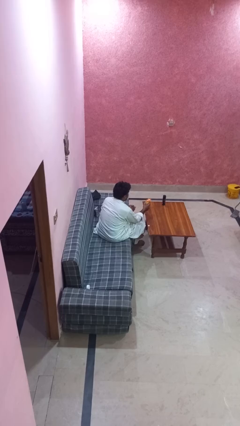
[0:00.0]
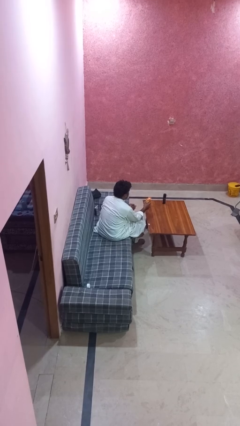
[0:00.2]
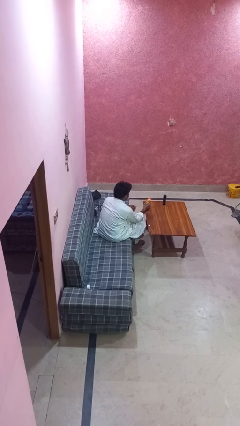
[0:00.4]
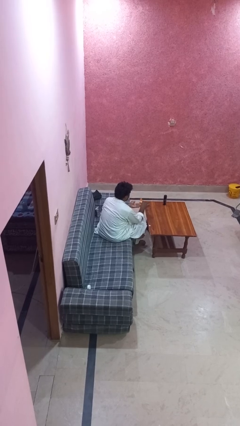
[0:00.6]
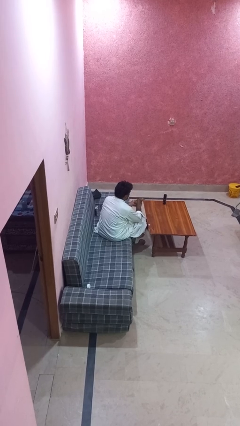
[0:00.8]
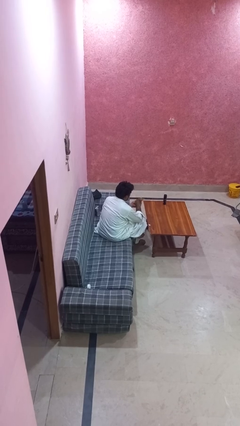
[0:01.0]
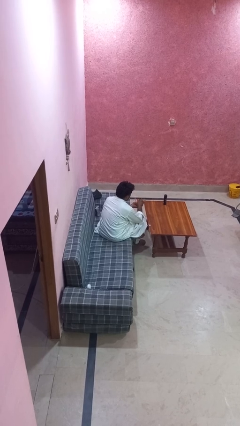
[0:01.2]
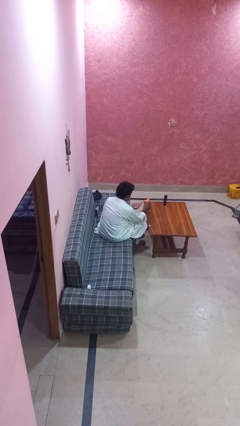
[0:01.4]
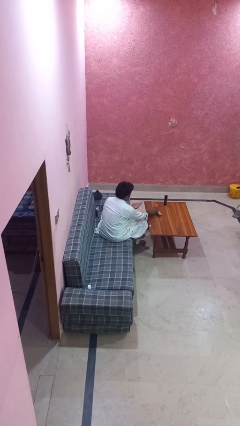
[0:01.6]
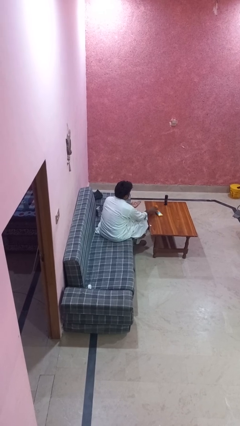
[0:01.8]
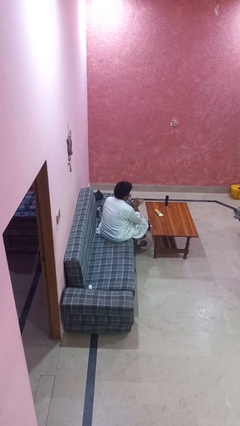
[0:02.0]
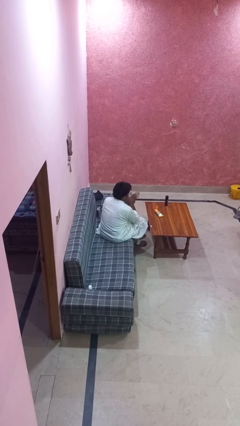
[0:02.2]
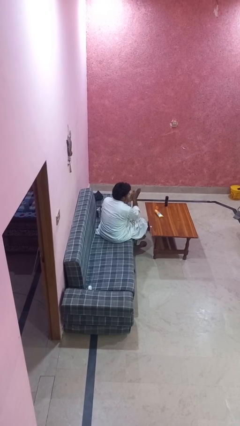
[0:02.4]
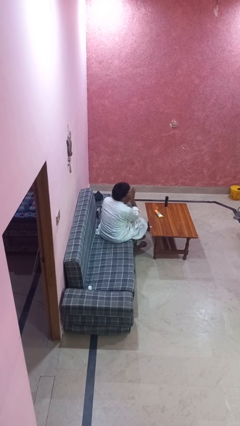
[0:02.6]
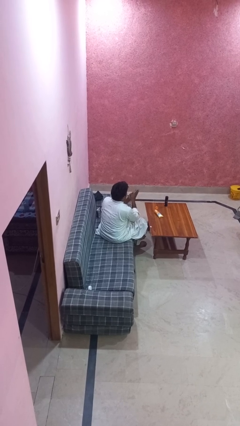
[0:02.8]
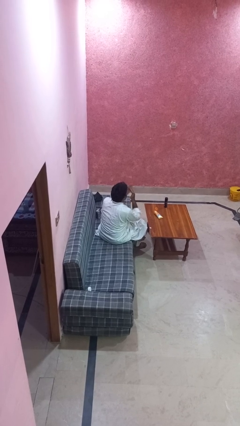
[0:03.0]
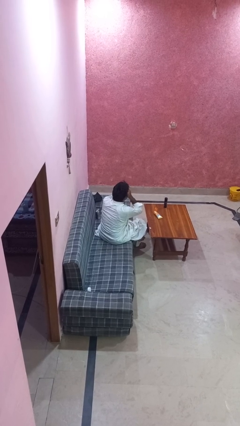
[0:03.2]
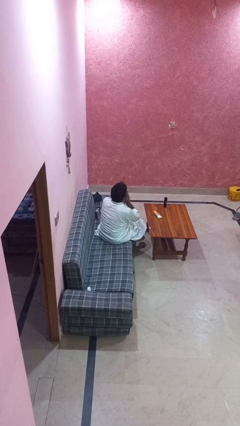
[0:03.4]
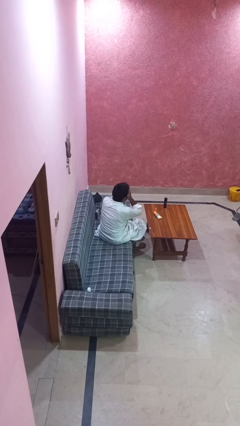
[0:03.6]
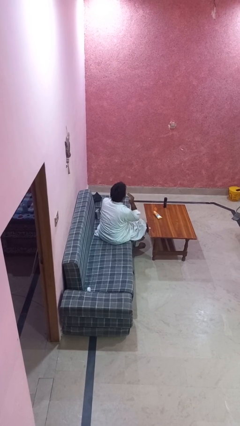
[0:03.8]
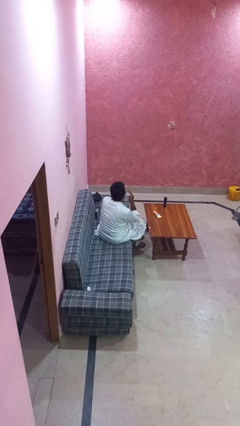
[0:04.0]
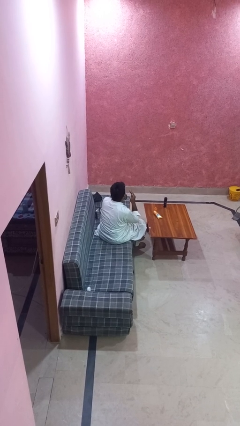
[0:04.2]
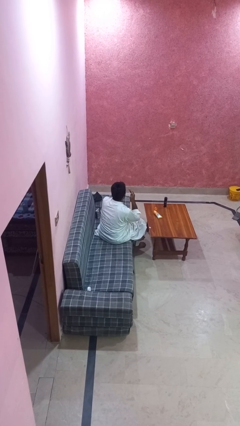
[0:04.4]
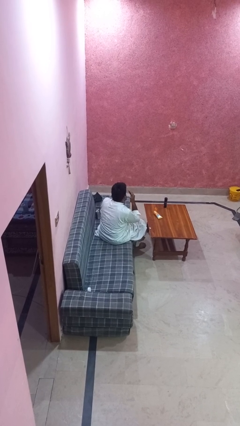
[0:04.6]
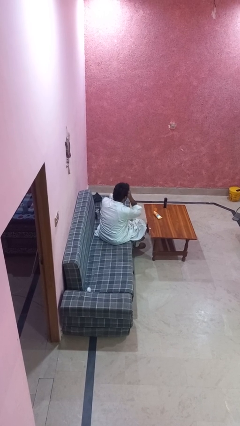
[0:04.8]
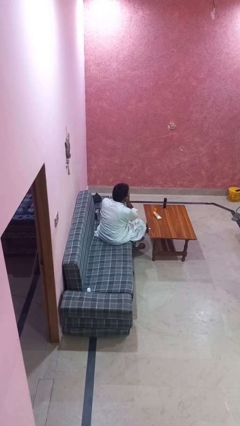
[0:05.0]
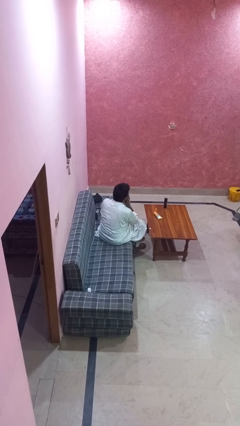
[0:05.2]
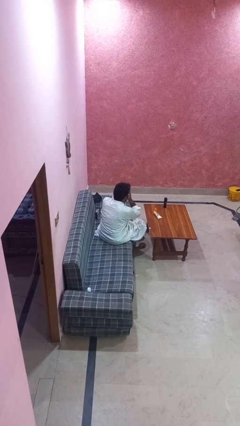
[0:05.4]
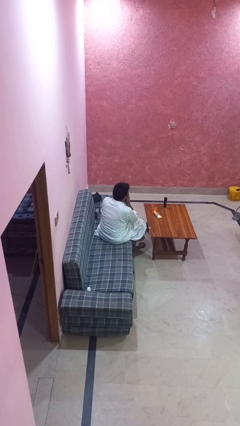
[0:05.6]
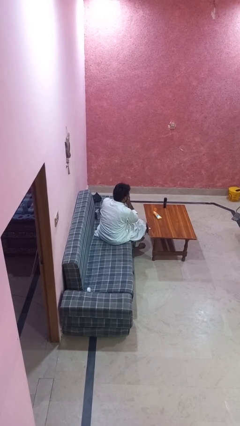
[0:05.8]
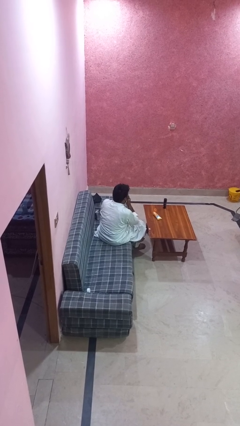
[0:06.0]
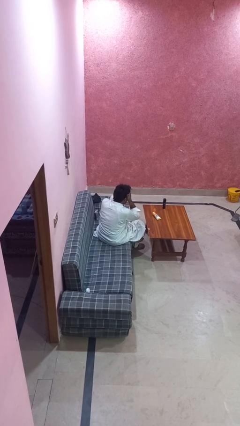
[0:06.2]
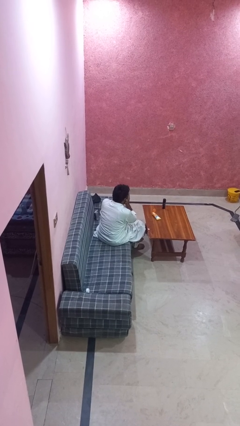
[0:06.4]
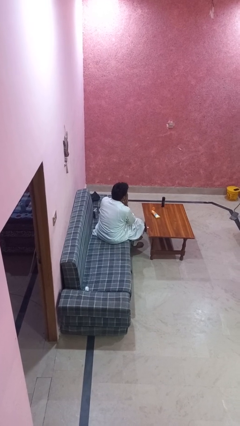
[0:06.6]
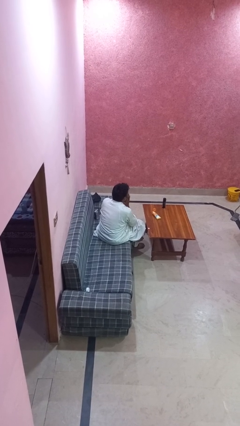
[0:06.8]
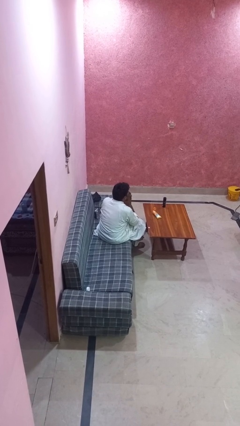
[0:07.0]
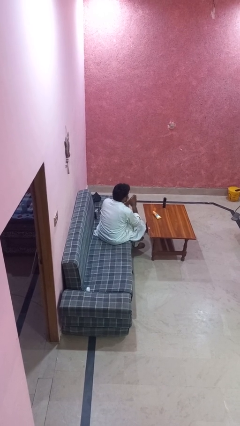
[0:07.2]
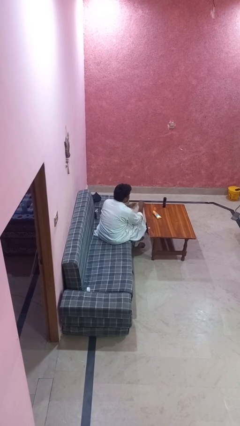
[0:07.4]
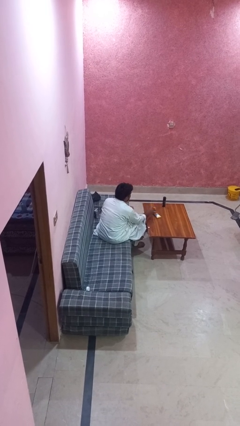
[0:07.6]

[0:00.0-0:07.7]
person applies sunscreen

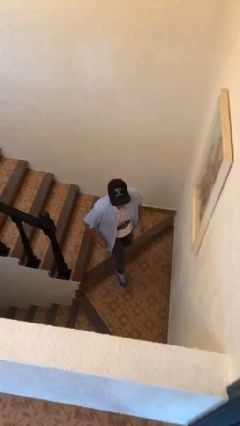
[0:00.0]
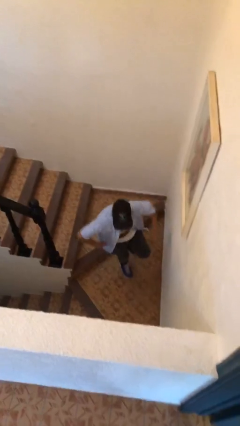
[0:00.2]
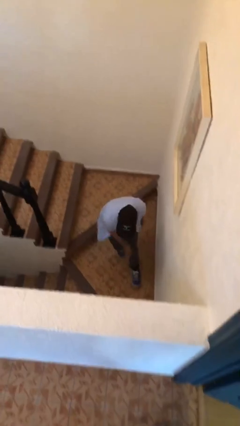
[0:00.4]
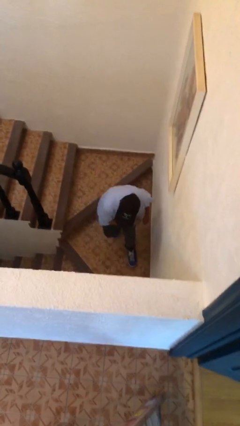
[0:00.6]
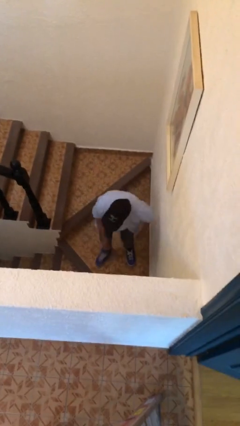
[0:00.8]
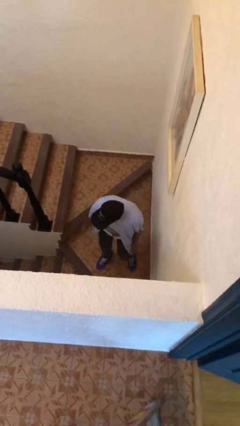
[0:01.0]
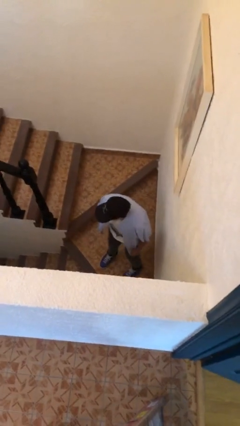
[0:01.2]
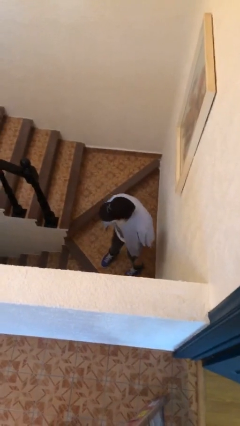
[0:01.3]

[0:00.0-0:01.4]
person trips on stair

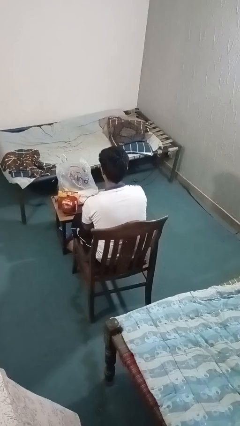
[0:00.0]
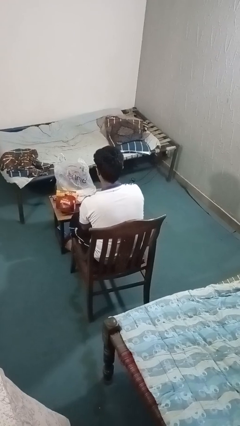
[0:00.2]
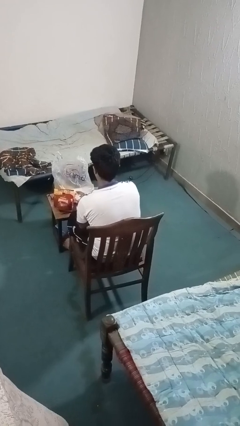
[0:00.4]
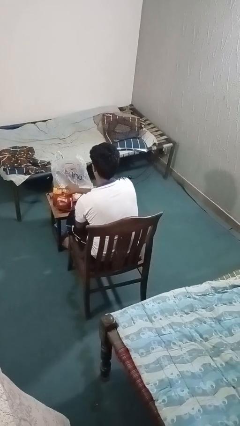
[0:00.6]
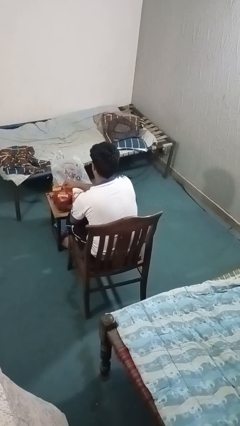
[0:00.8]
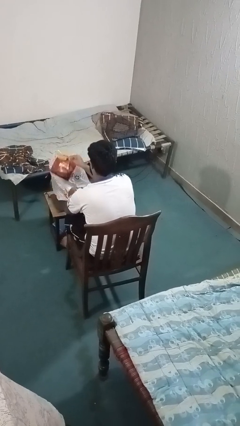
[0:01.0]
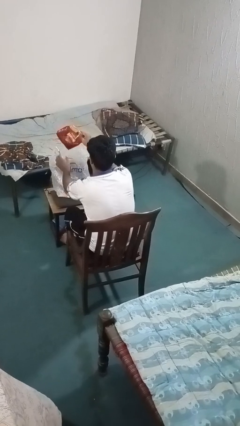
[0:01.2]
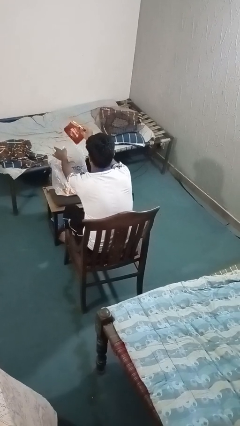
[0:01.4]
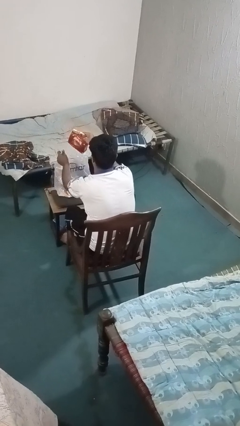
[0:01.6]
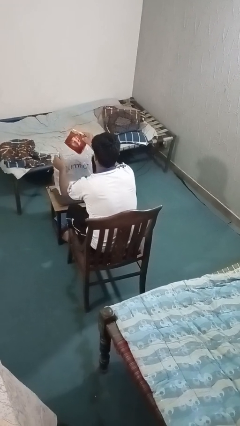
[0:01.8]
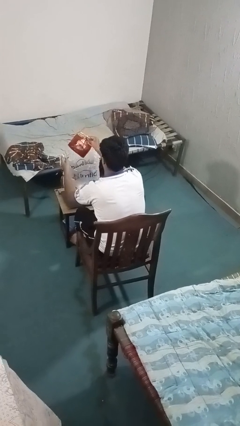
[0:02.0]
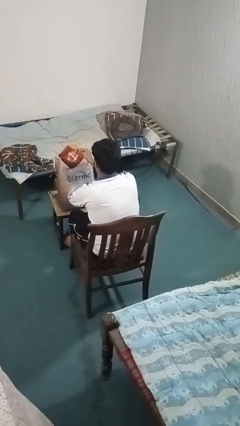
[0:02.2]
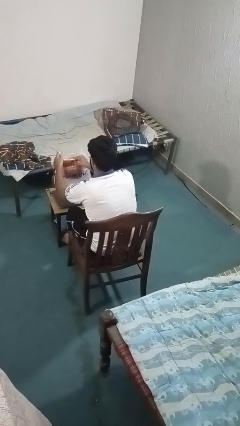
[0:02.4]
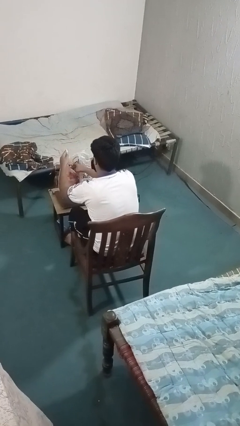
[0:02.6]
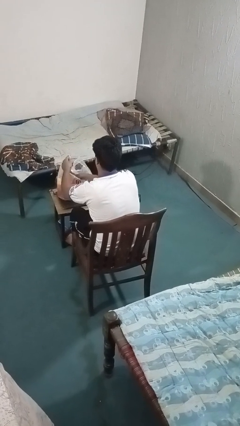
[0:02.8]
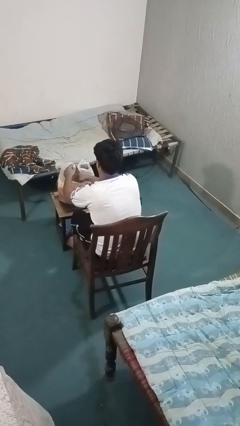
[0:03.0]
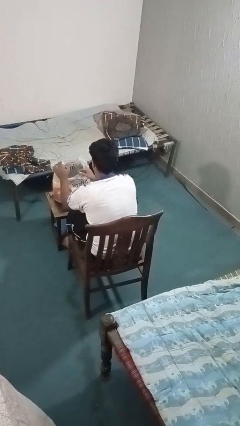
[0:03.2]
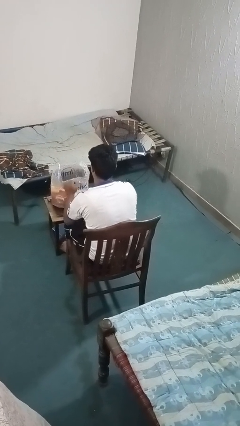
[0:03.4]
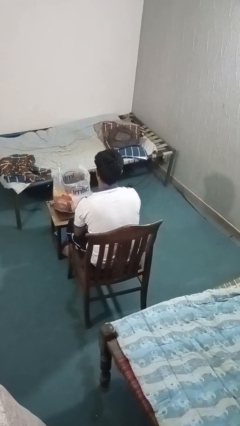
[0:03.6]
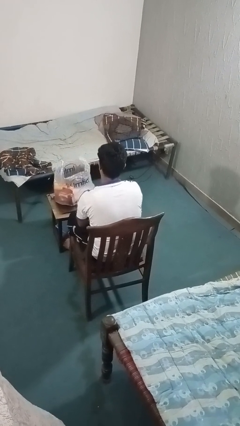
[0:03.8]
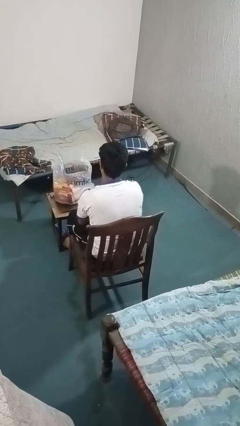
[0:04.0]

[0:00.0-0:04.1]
person puts object into bag

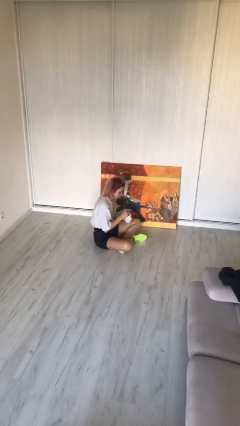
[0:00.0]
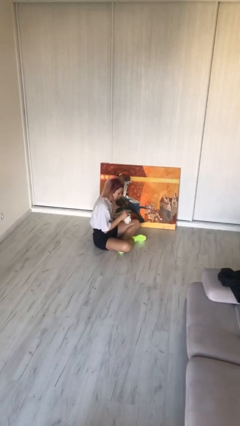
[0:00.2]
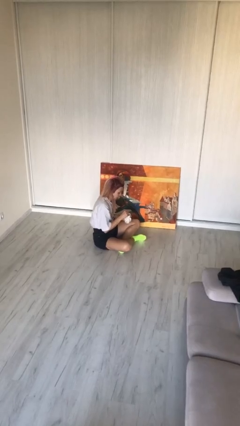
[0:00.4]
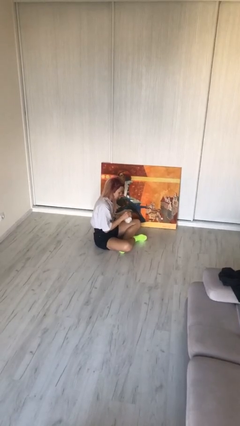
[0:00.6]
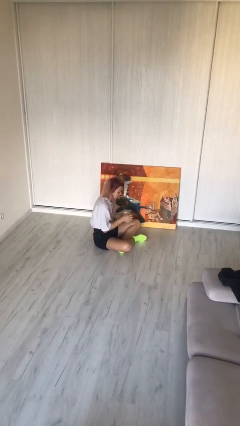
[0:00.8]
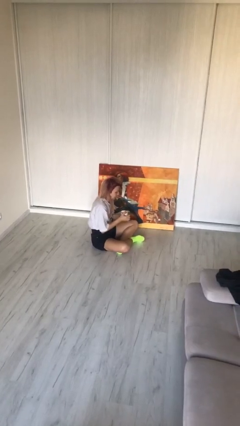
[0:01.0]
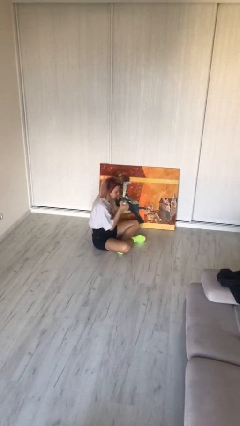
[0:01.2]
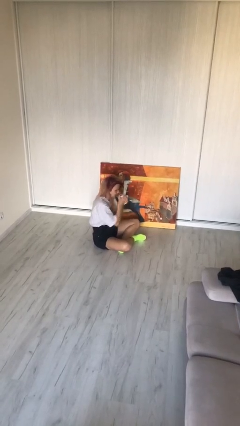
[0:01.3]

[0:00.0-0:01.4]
person stirs mug

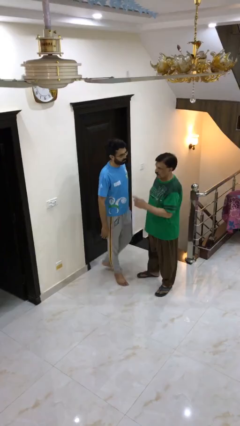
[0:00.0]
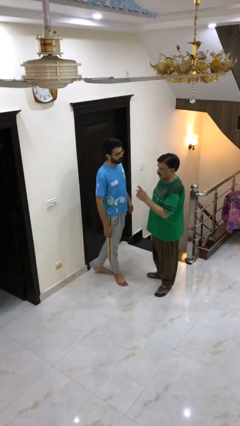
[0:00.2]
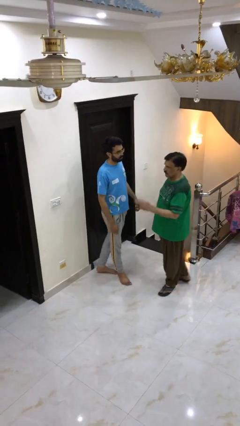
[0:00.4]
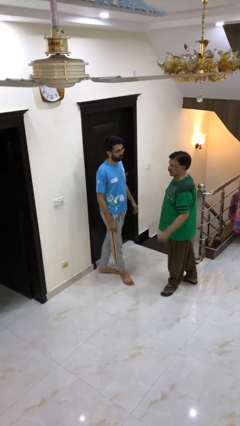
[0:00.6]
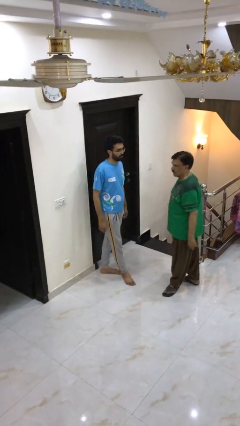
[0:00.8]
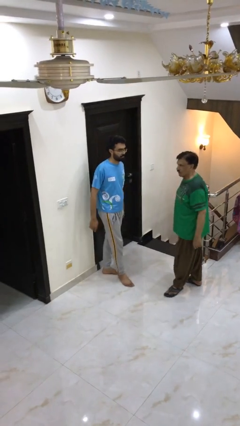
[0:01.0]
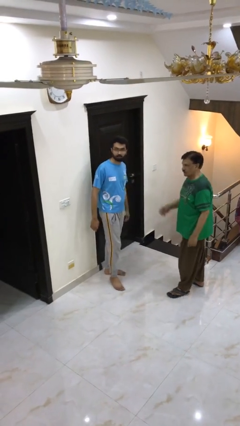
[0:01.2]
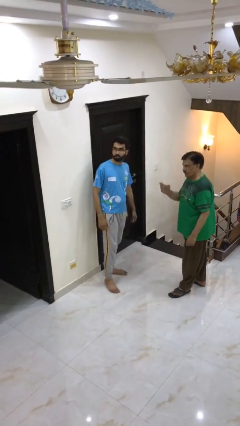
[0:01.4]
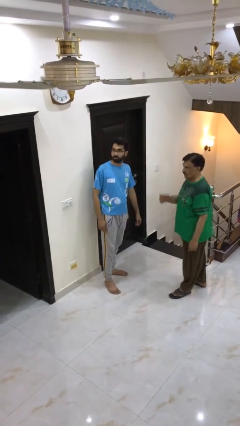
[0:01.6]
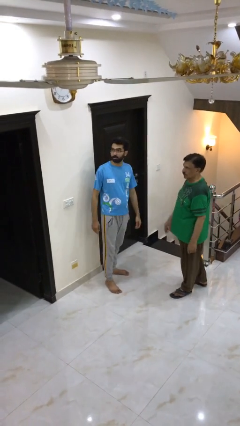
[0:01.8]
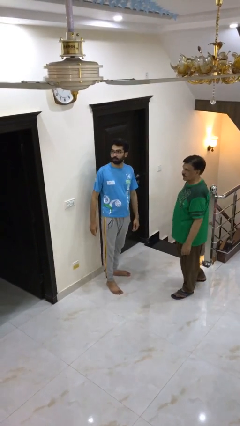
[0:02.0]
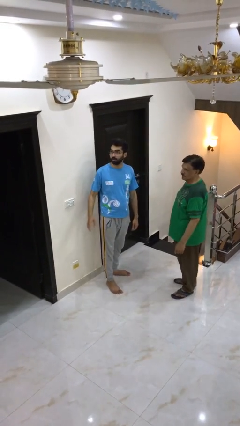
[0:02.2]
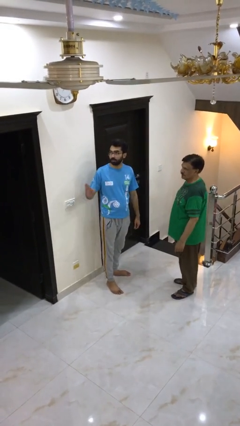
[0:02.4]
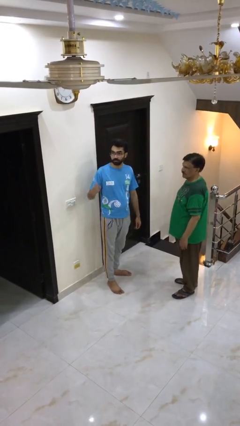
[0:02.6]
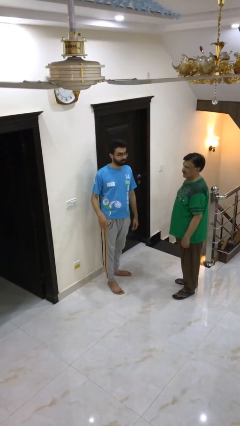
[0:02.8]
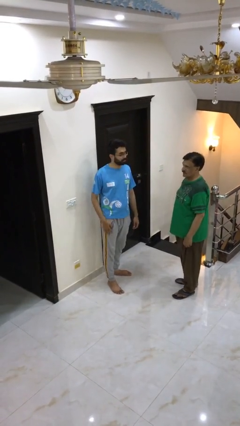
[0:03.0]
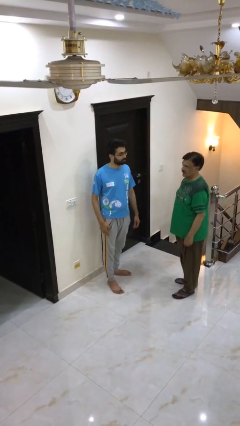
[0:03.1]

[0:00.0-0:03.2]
person talks to person
